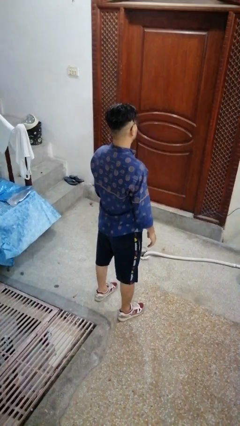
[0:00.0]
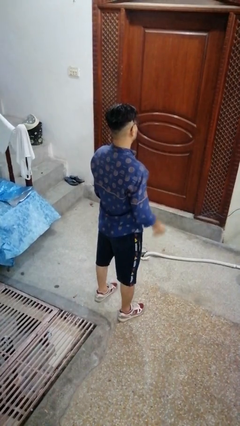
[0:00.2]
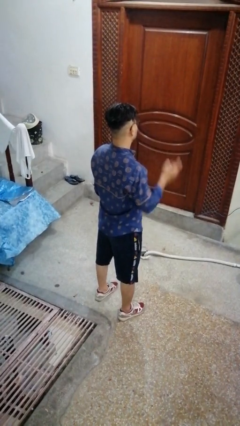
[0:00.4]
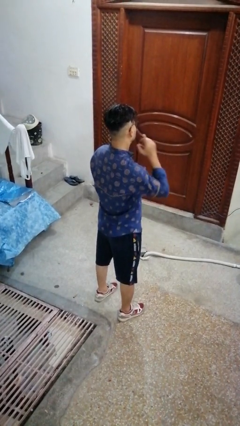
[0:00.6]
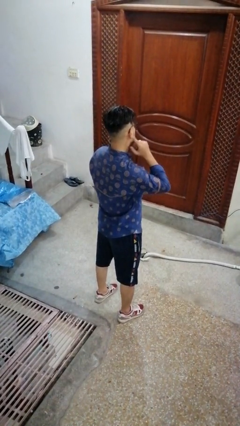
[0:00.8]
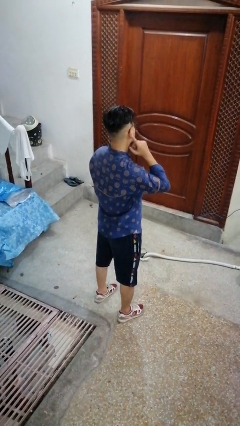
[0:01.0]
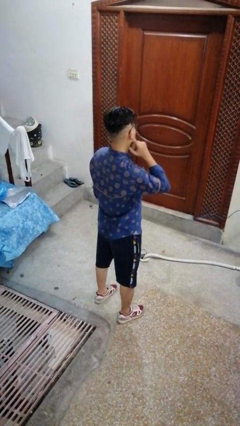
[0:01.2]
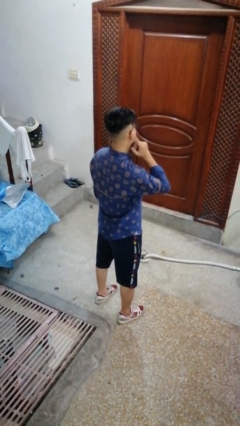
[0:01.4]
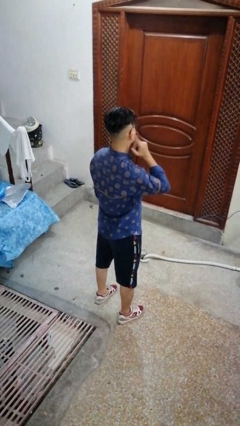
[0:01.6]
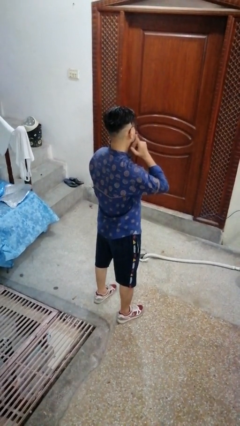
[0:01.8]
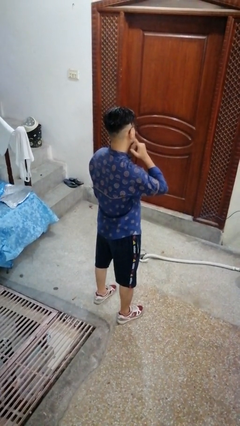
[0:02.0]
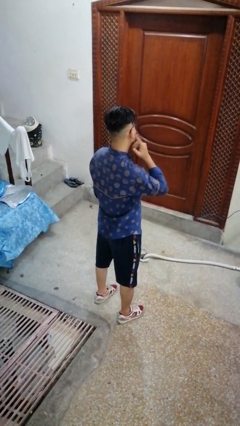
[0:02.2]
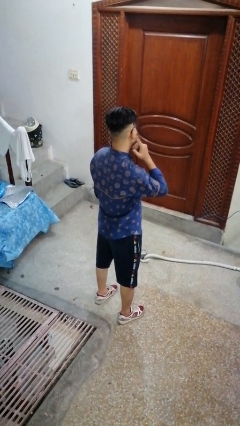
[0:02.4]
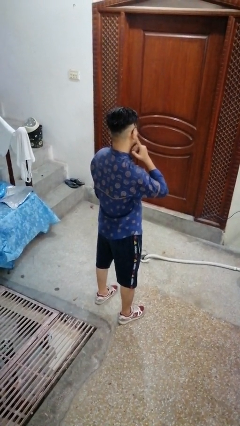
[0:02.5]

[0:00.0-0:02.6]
person gestures listen closely

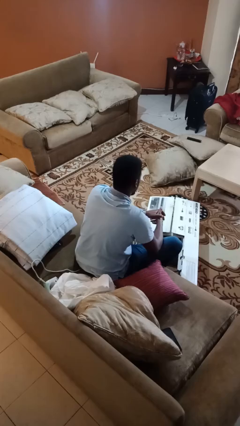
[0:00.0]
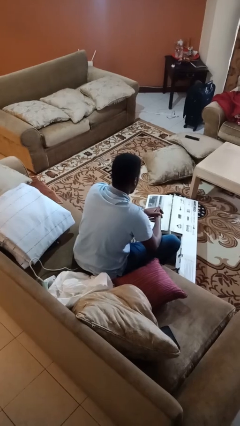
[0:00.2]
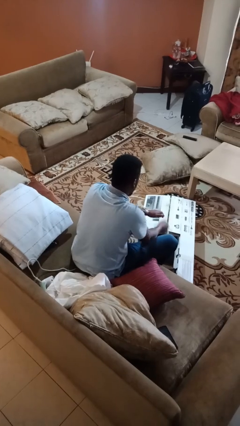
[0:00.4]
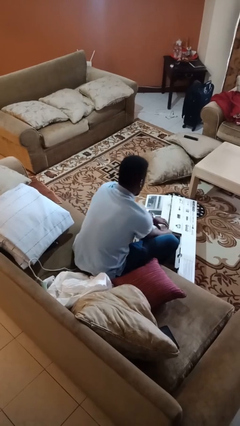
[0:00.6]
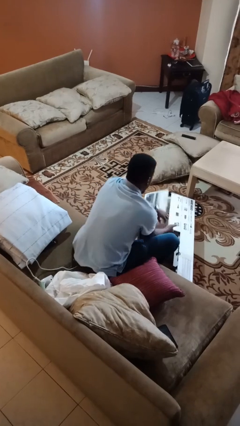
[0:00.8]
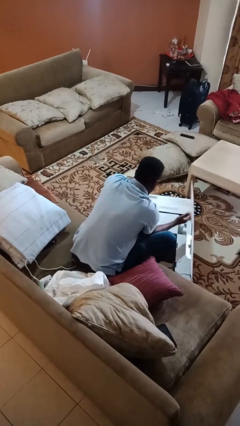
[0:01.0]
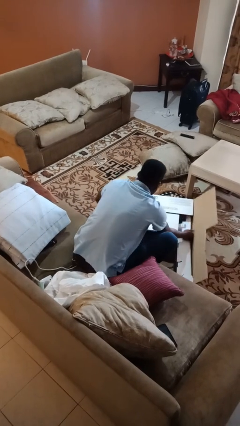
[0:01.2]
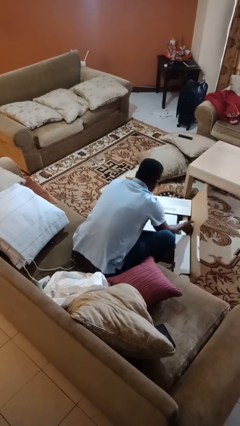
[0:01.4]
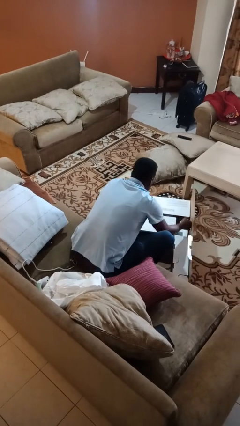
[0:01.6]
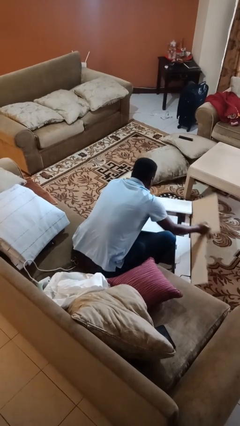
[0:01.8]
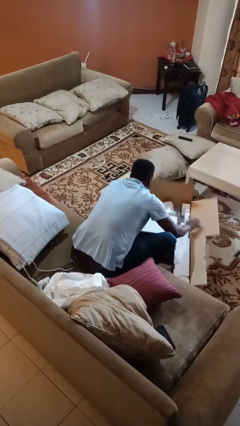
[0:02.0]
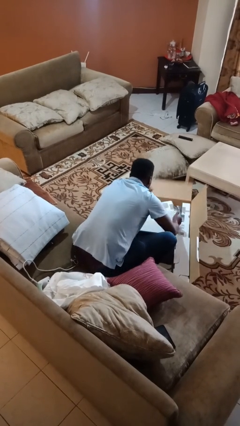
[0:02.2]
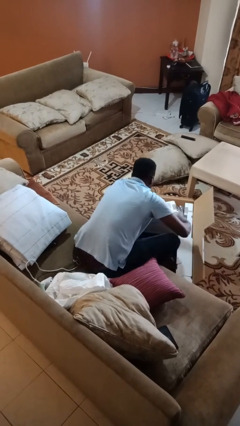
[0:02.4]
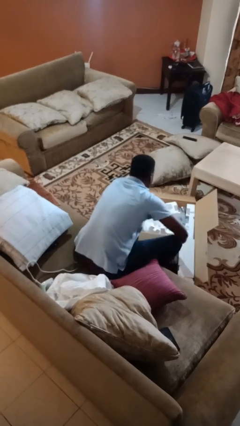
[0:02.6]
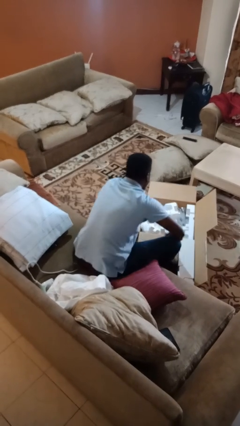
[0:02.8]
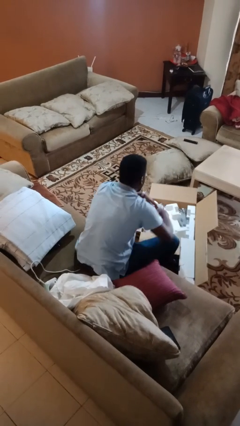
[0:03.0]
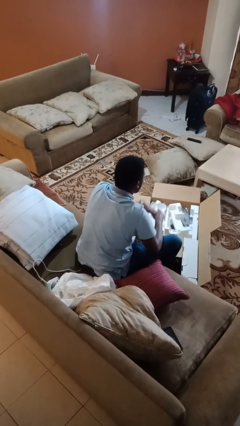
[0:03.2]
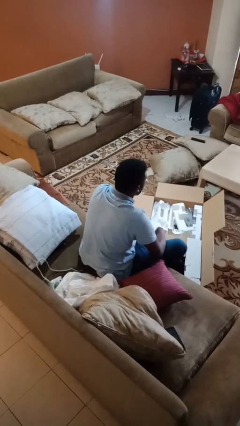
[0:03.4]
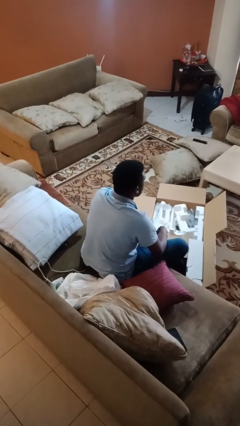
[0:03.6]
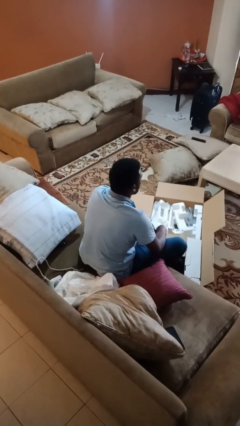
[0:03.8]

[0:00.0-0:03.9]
person opens box

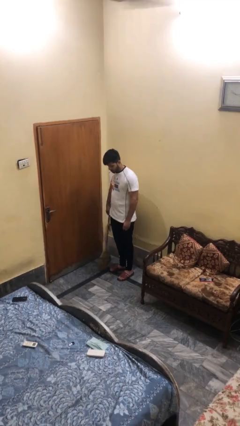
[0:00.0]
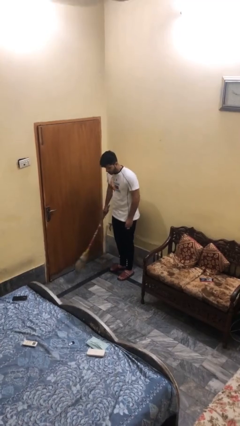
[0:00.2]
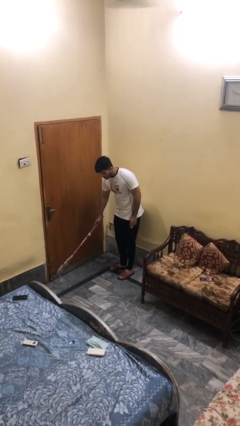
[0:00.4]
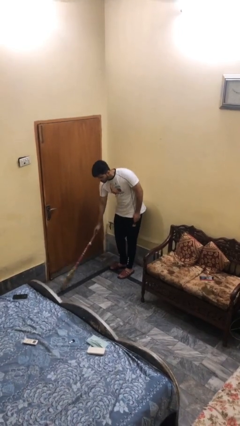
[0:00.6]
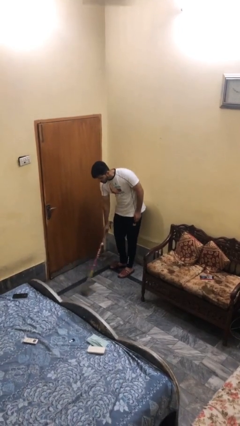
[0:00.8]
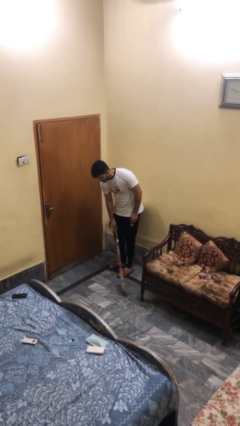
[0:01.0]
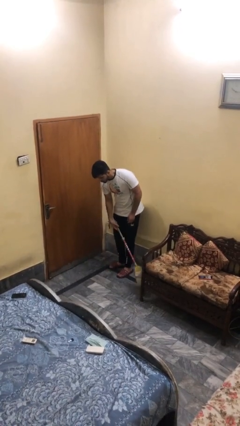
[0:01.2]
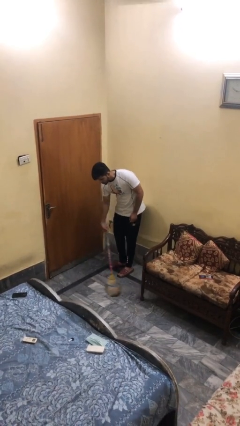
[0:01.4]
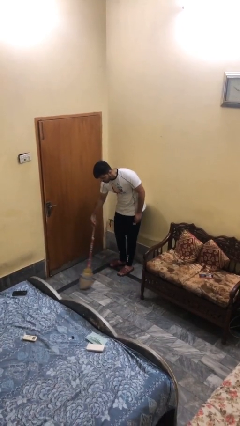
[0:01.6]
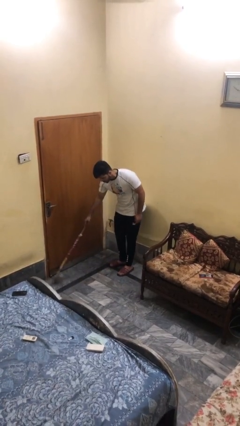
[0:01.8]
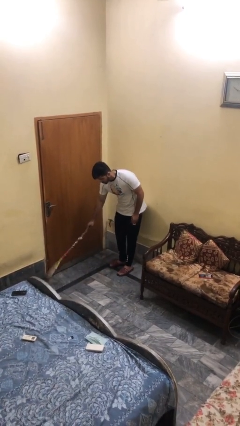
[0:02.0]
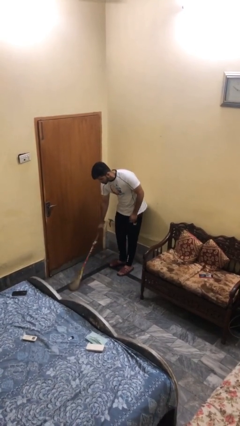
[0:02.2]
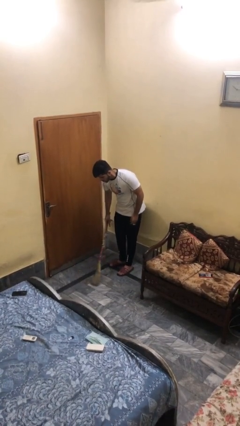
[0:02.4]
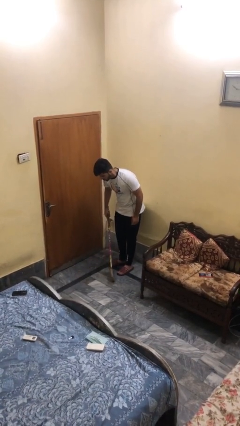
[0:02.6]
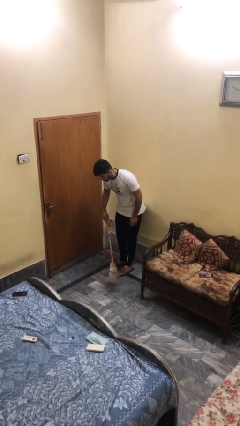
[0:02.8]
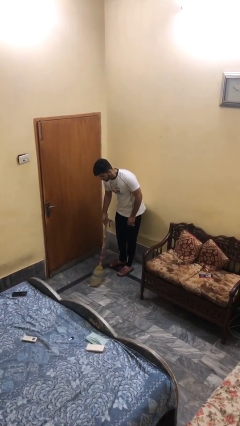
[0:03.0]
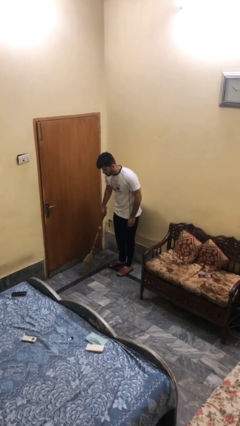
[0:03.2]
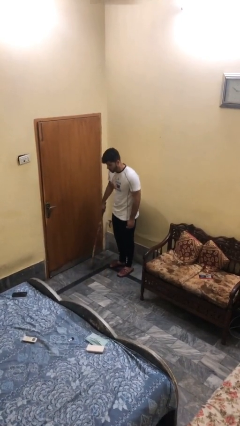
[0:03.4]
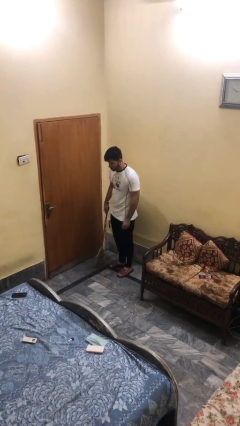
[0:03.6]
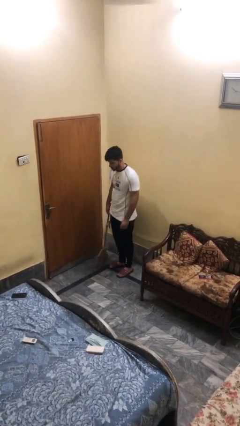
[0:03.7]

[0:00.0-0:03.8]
person sweeps floor

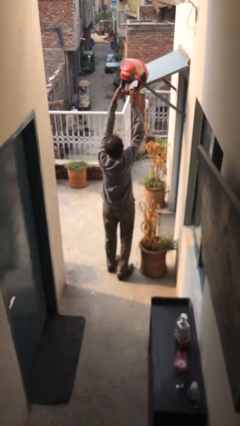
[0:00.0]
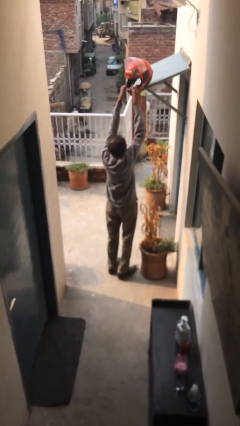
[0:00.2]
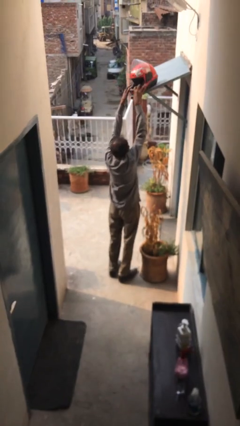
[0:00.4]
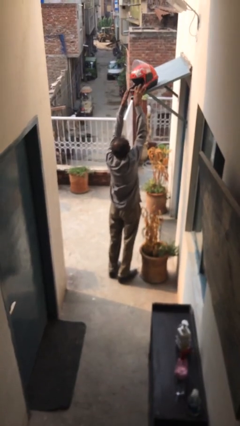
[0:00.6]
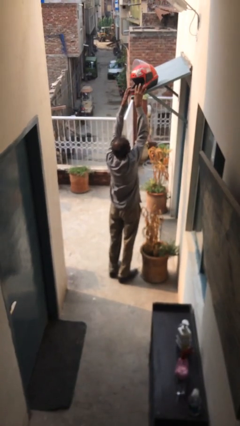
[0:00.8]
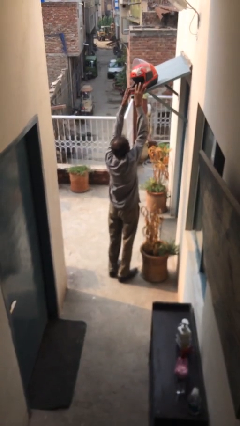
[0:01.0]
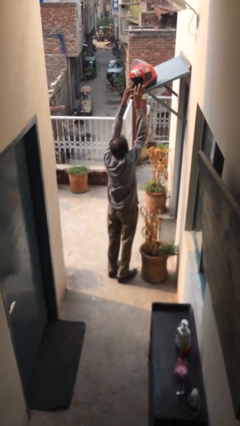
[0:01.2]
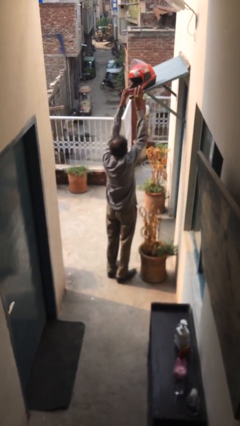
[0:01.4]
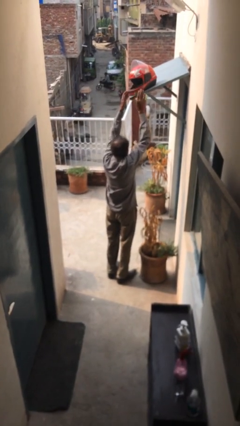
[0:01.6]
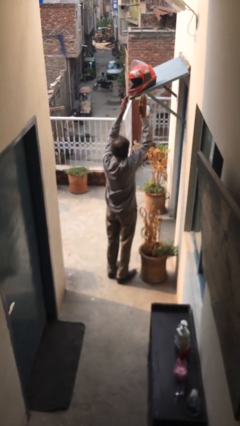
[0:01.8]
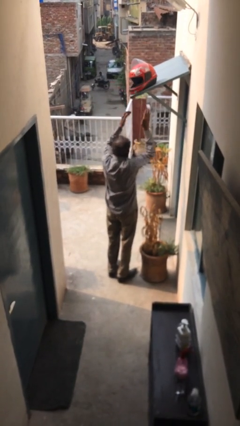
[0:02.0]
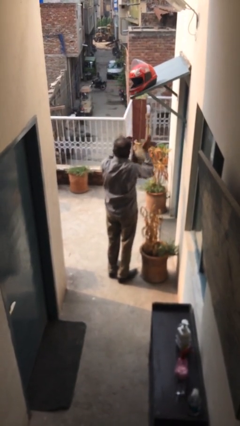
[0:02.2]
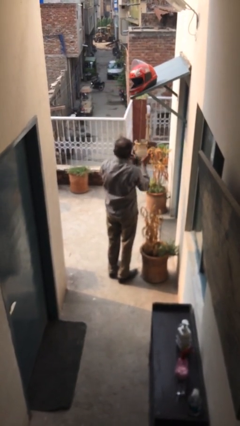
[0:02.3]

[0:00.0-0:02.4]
person puts down object on shelf

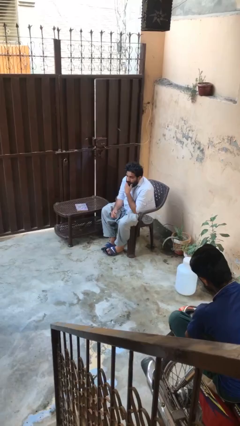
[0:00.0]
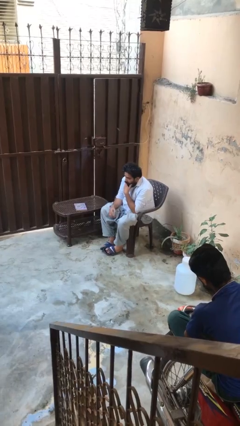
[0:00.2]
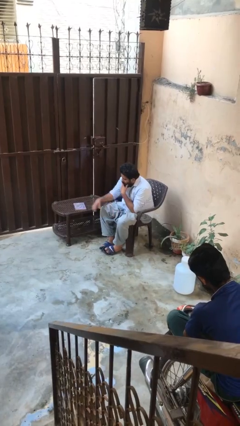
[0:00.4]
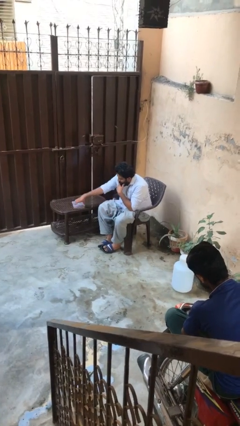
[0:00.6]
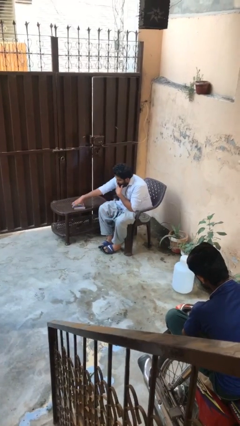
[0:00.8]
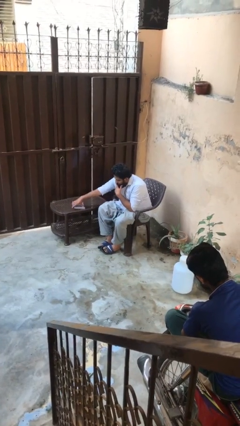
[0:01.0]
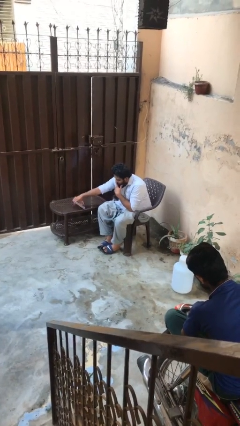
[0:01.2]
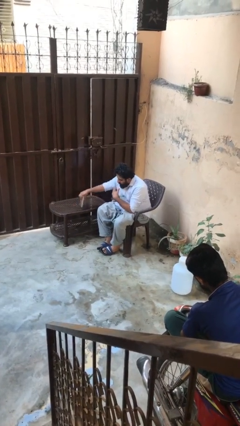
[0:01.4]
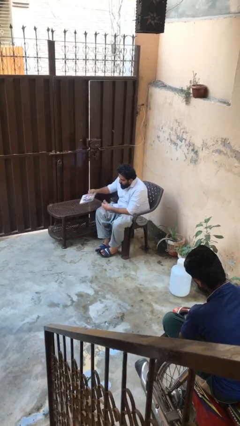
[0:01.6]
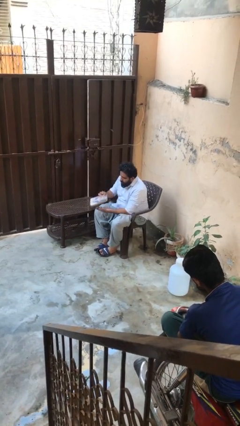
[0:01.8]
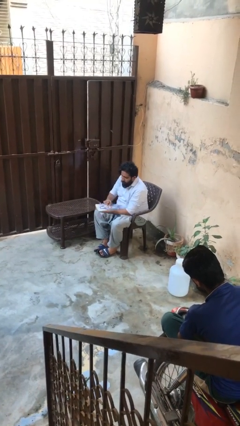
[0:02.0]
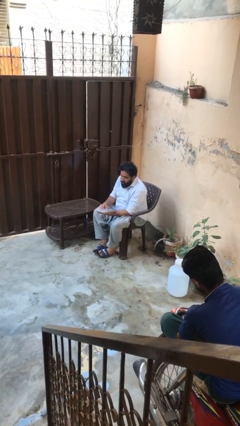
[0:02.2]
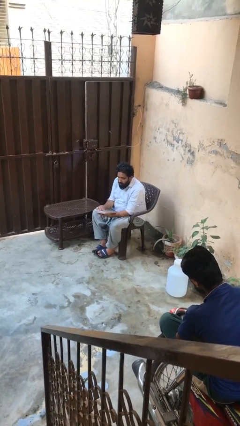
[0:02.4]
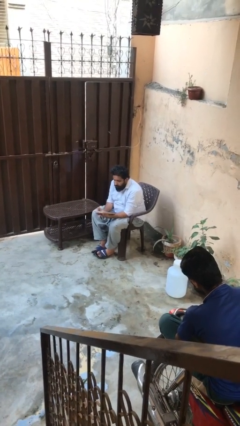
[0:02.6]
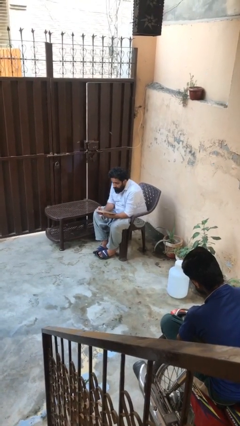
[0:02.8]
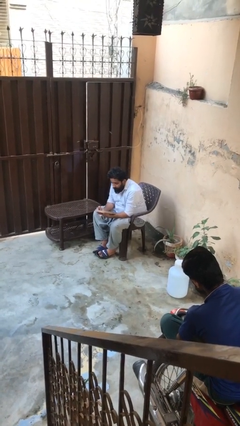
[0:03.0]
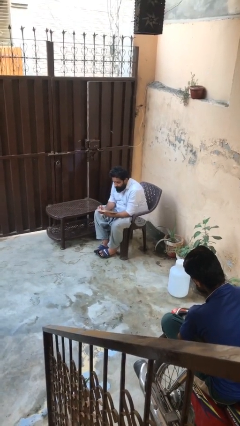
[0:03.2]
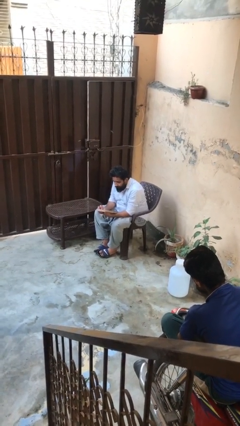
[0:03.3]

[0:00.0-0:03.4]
person picks up object from table

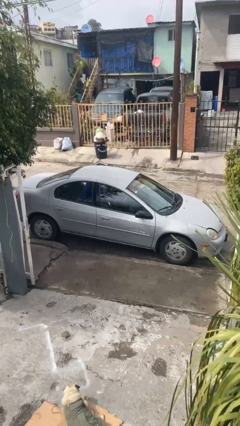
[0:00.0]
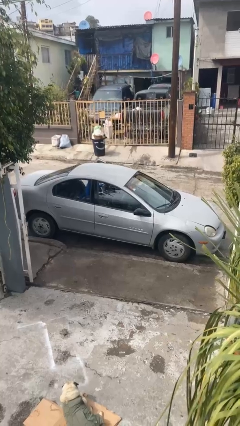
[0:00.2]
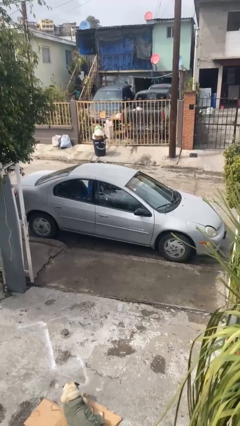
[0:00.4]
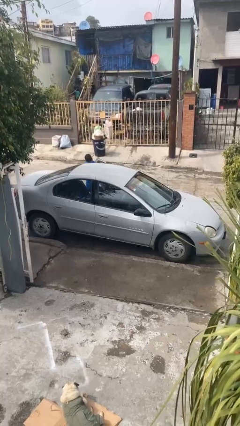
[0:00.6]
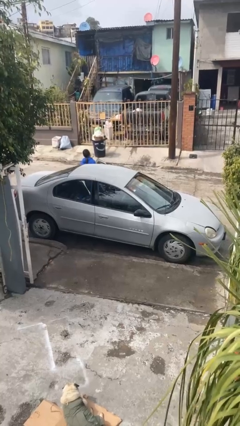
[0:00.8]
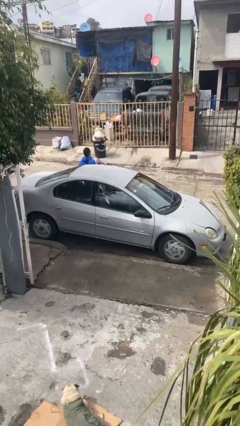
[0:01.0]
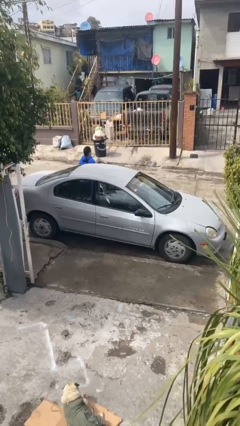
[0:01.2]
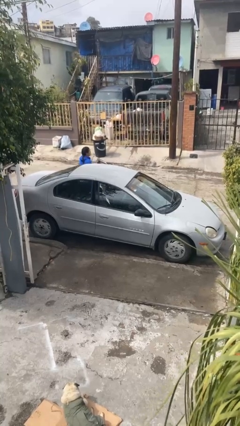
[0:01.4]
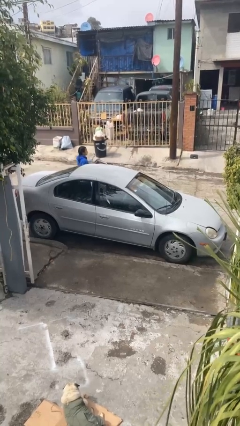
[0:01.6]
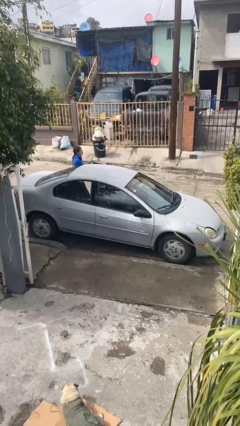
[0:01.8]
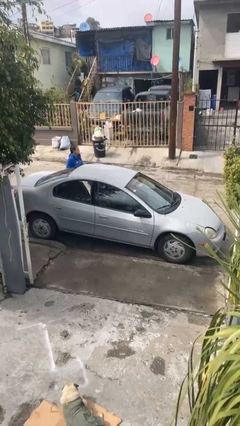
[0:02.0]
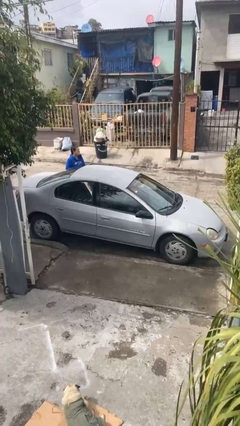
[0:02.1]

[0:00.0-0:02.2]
car drops off person
